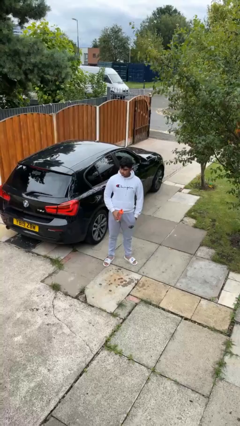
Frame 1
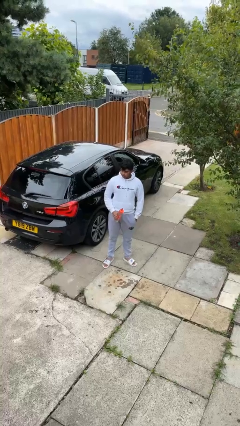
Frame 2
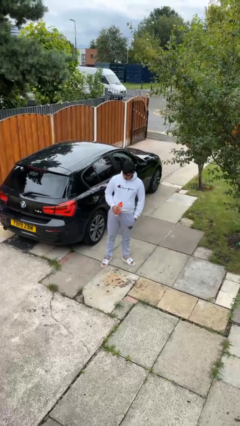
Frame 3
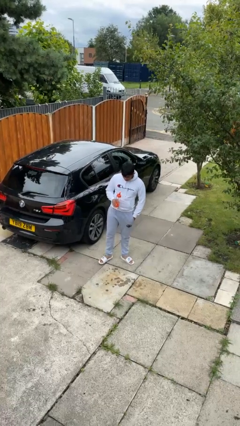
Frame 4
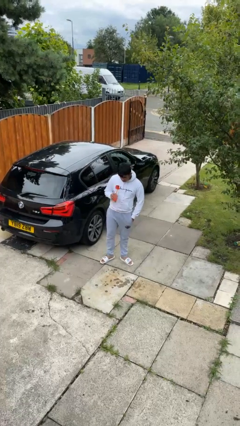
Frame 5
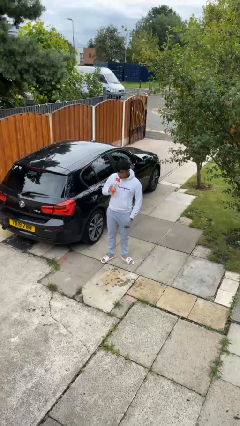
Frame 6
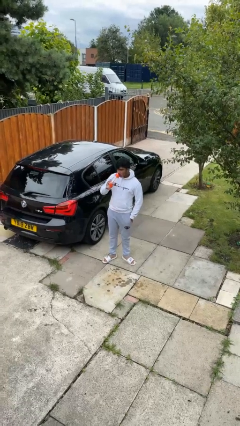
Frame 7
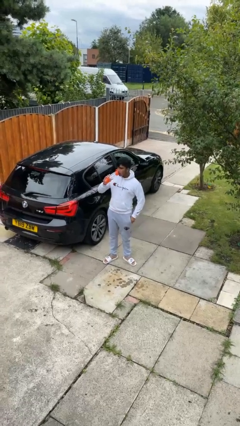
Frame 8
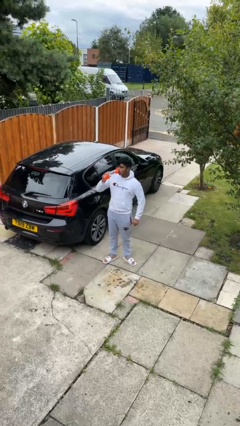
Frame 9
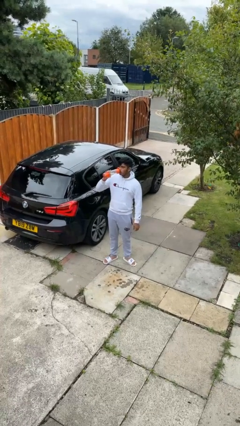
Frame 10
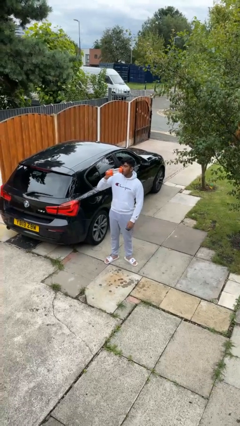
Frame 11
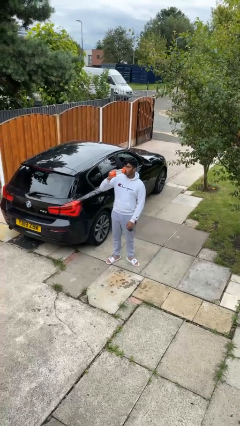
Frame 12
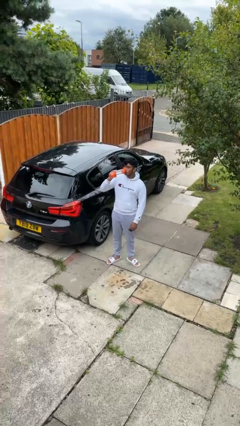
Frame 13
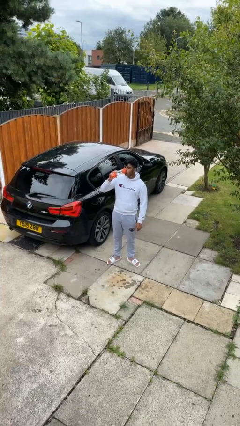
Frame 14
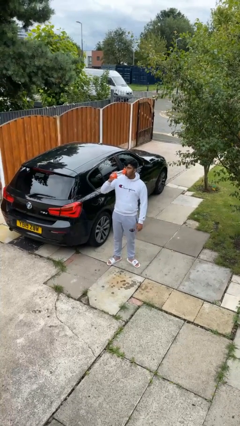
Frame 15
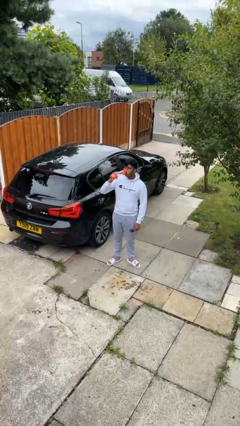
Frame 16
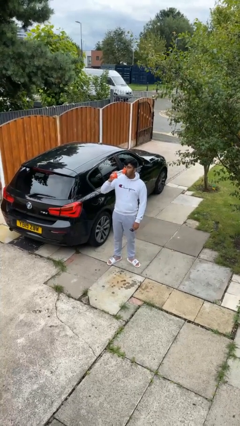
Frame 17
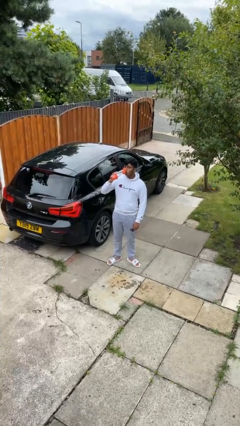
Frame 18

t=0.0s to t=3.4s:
person drinks from bottle

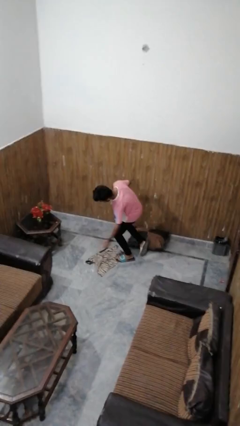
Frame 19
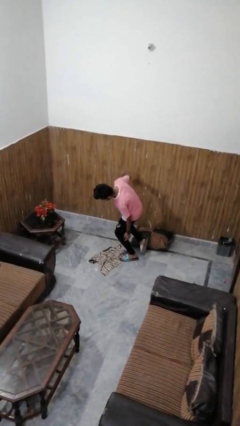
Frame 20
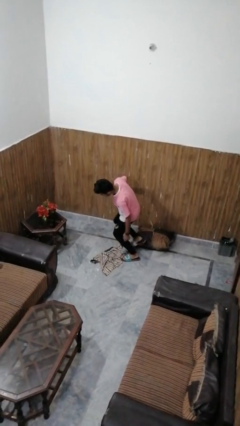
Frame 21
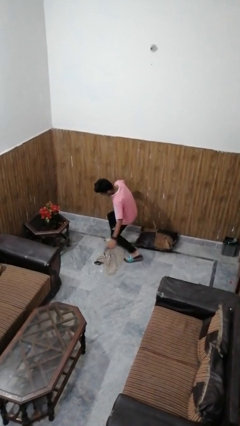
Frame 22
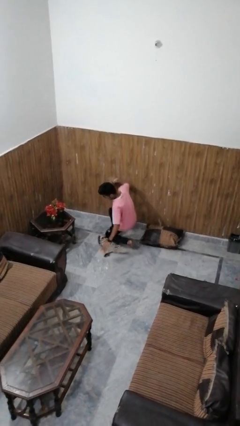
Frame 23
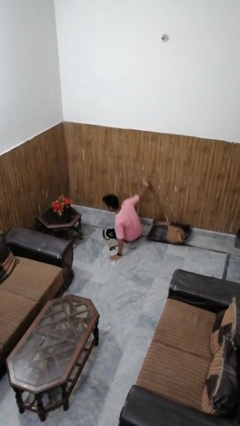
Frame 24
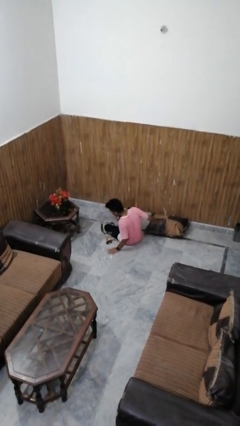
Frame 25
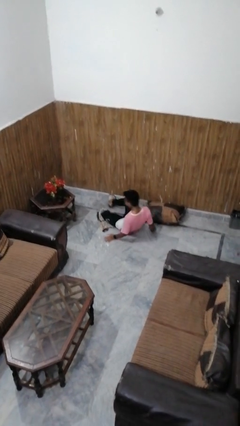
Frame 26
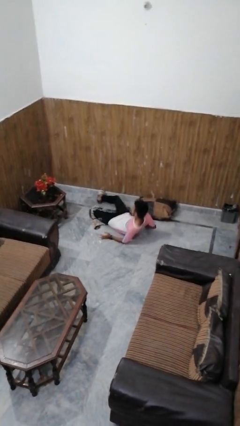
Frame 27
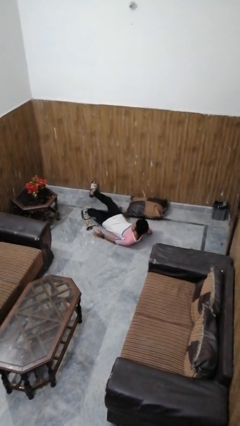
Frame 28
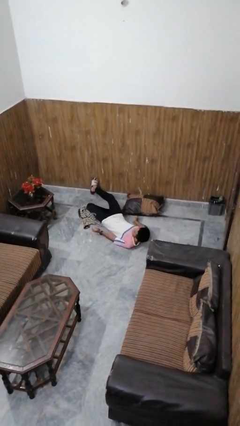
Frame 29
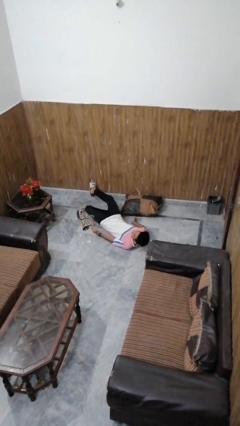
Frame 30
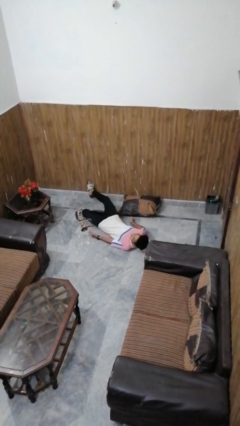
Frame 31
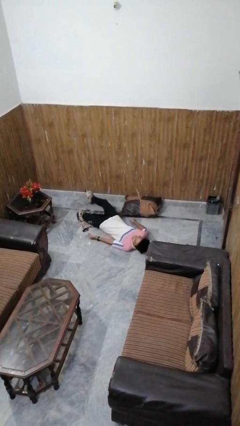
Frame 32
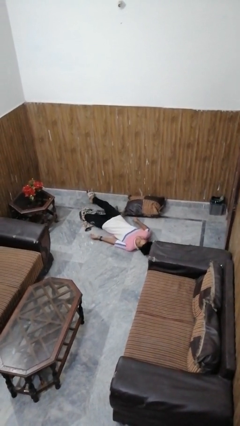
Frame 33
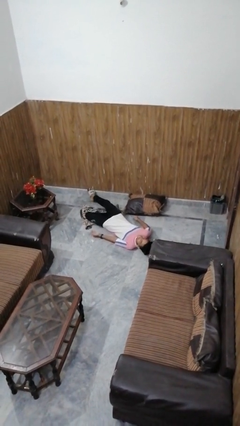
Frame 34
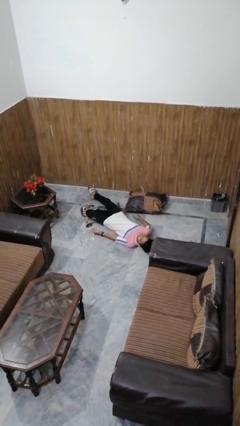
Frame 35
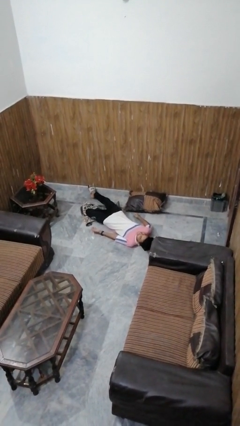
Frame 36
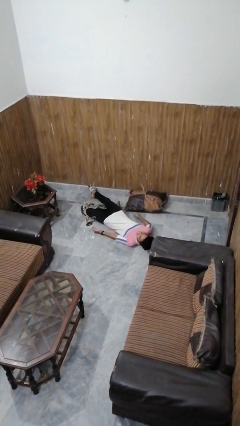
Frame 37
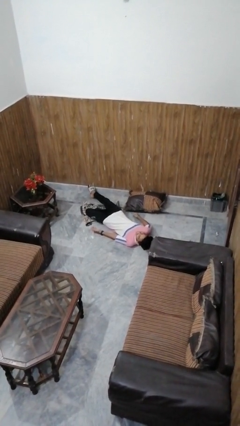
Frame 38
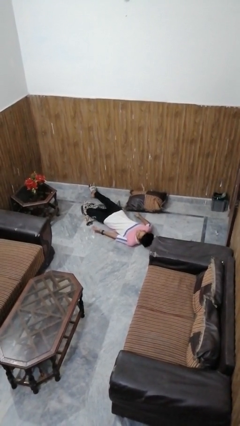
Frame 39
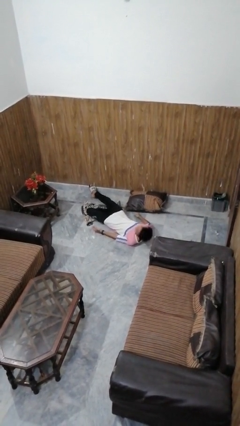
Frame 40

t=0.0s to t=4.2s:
person lies down on floor

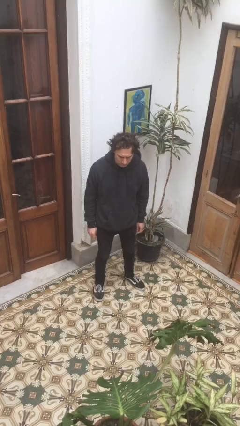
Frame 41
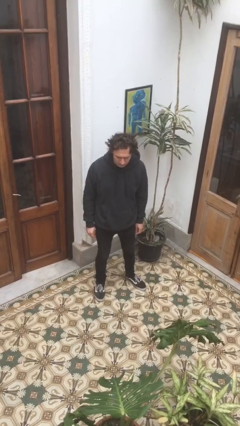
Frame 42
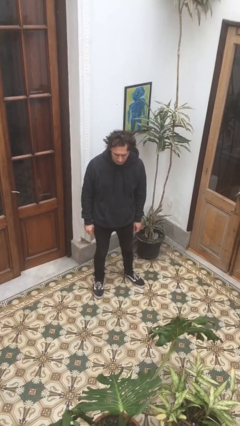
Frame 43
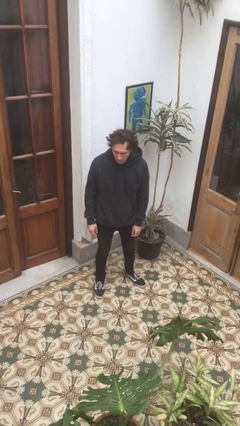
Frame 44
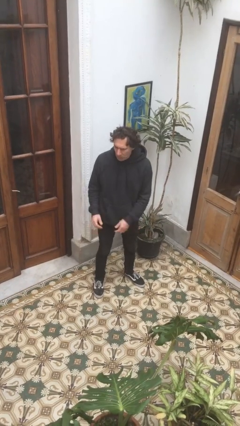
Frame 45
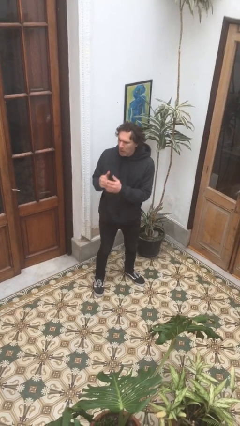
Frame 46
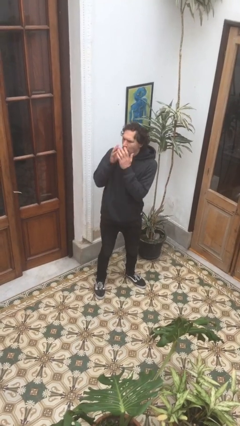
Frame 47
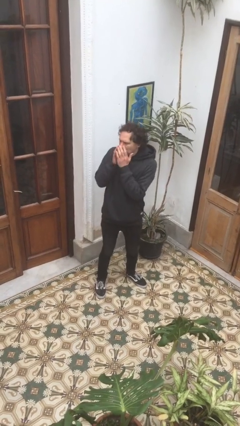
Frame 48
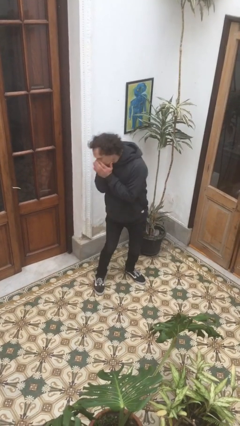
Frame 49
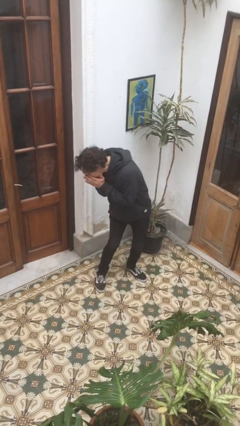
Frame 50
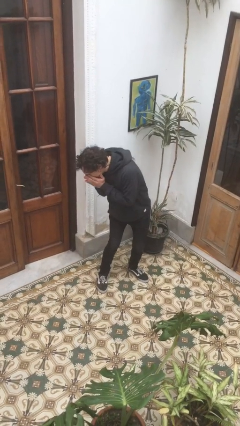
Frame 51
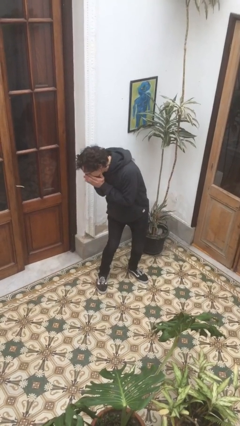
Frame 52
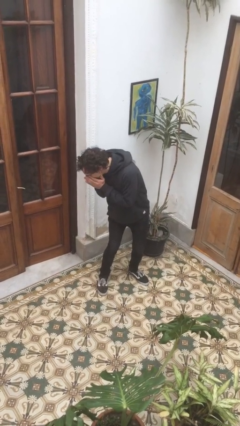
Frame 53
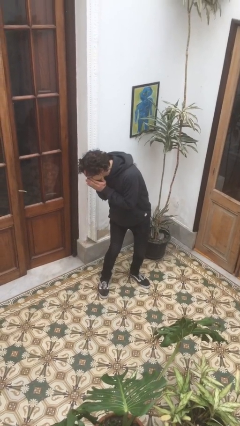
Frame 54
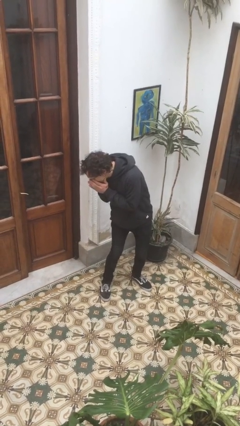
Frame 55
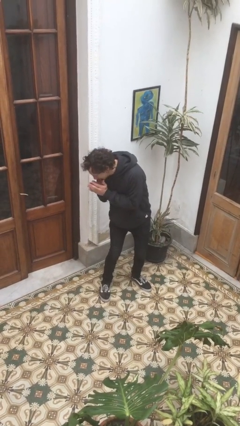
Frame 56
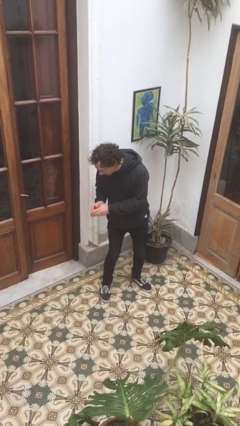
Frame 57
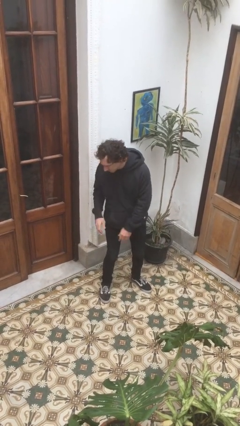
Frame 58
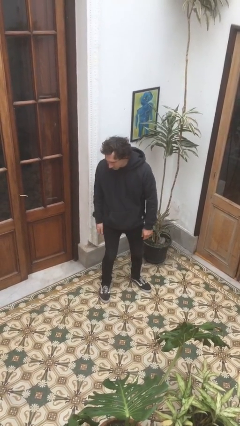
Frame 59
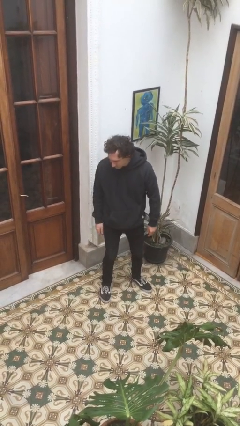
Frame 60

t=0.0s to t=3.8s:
person sneezes into hand

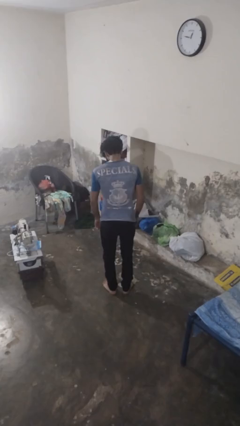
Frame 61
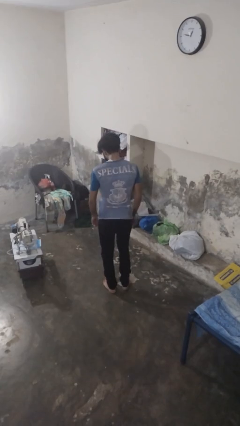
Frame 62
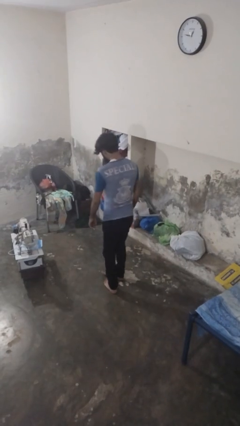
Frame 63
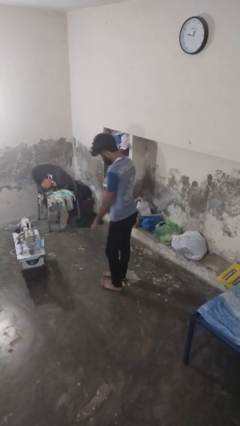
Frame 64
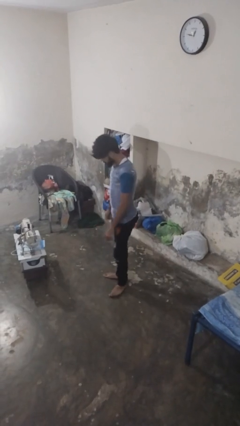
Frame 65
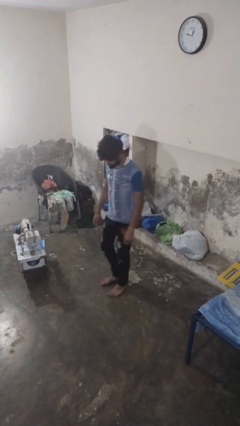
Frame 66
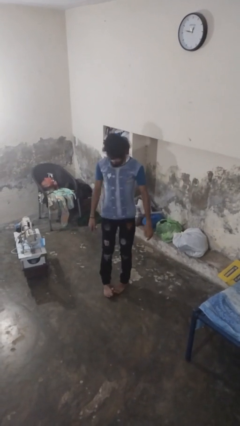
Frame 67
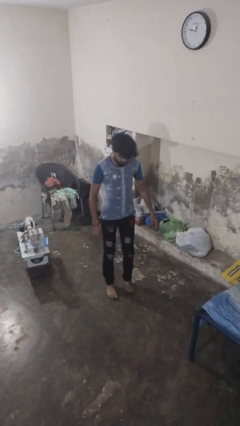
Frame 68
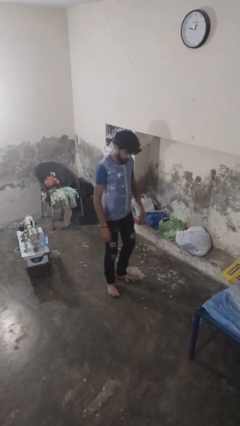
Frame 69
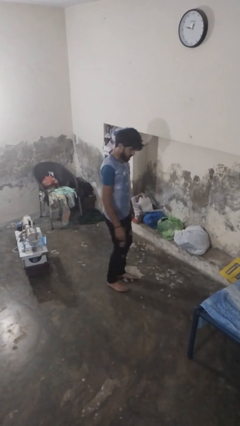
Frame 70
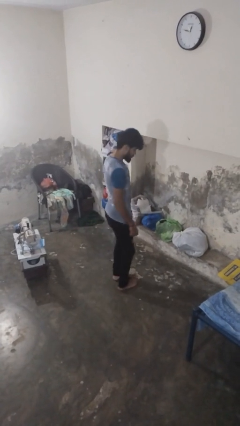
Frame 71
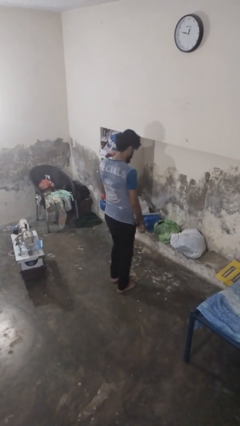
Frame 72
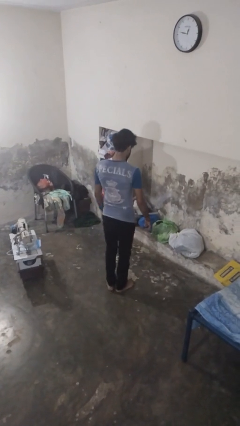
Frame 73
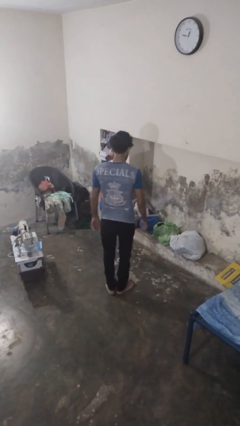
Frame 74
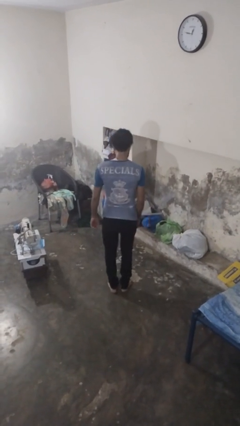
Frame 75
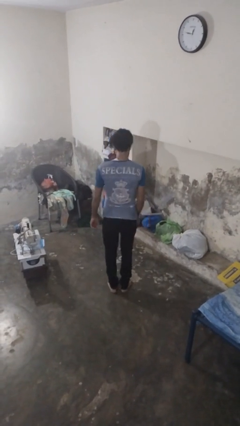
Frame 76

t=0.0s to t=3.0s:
person twirls

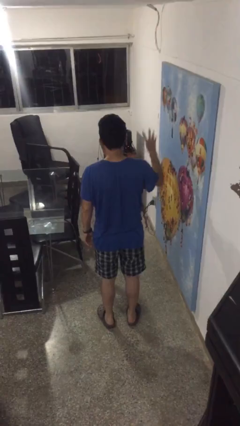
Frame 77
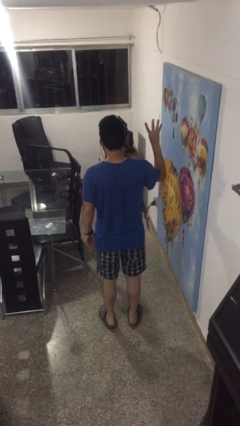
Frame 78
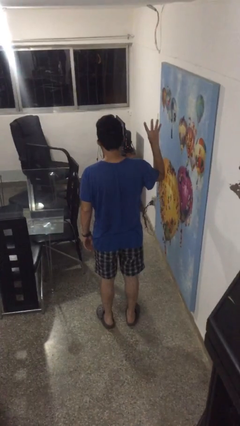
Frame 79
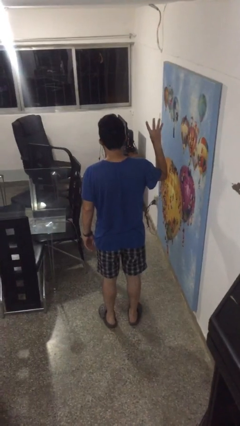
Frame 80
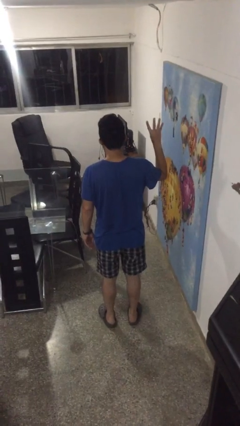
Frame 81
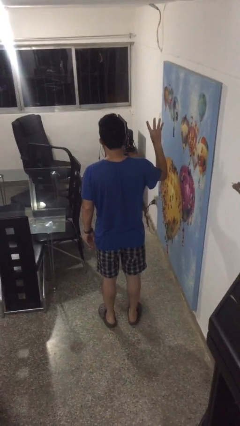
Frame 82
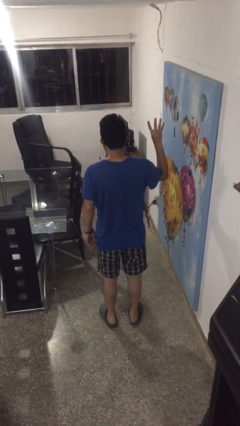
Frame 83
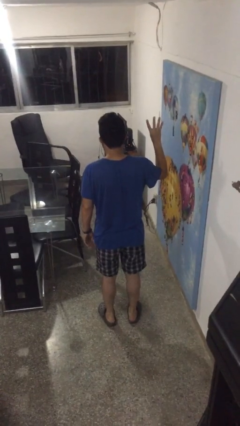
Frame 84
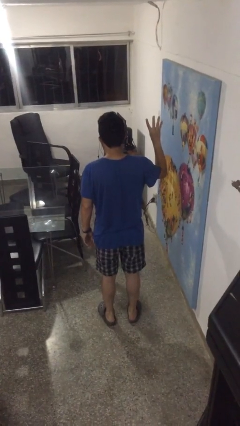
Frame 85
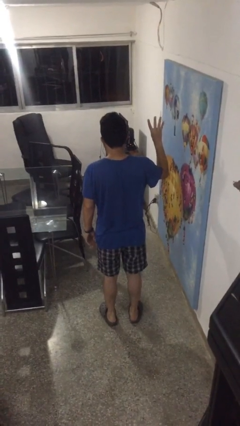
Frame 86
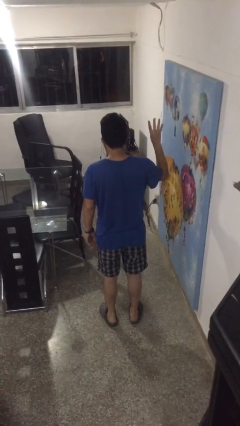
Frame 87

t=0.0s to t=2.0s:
person gestures number four

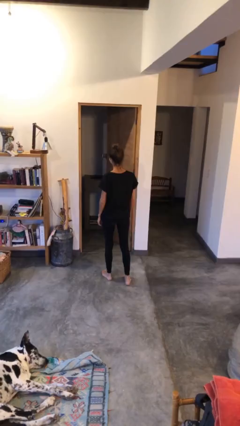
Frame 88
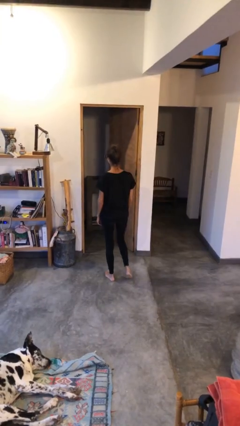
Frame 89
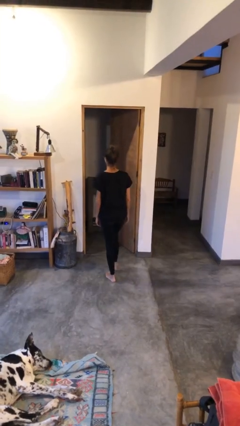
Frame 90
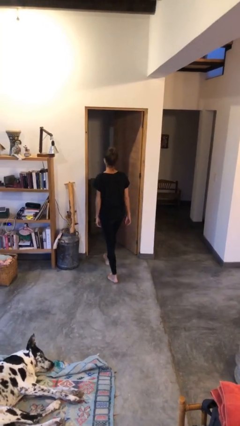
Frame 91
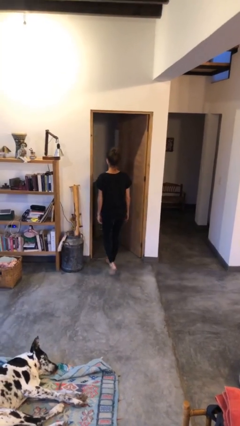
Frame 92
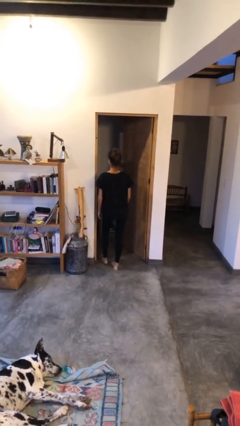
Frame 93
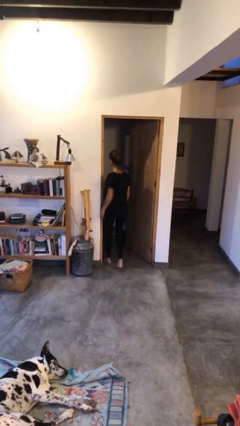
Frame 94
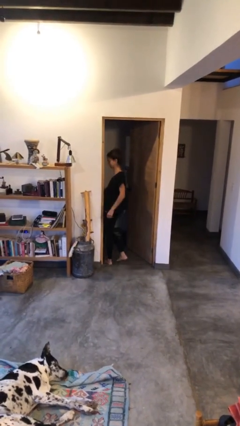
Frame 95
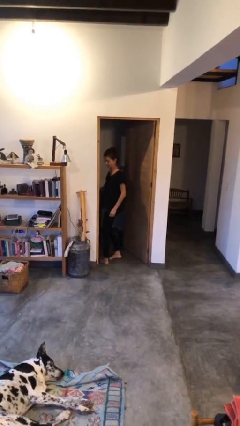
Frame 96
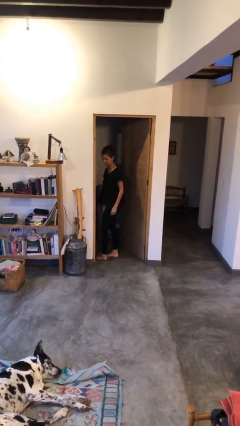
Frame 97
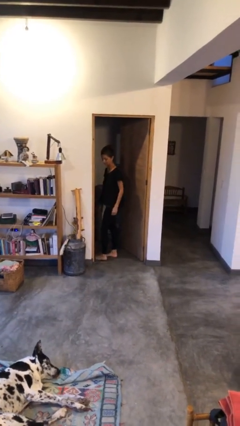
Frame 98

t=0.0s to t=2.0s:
person bumps into wall
